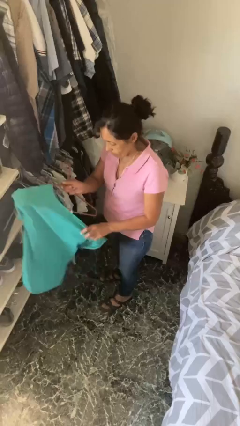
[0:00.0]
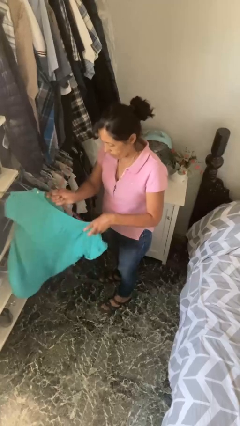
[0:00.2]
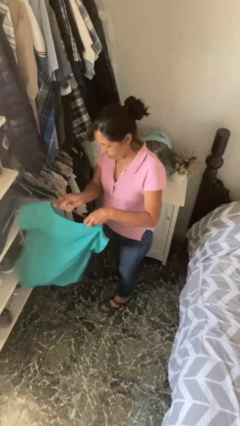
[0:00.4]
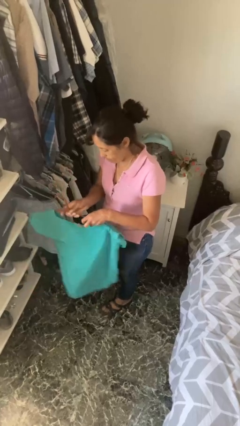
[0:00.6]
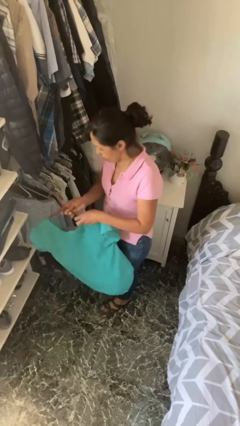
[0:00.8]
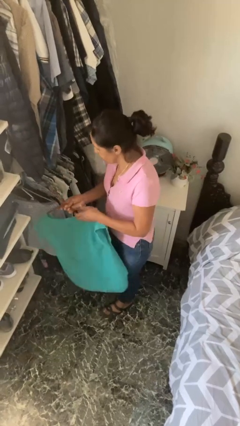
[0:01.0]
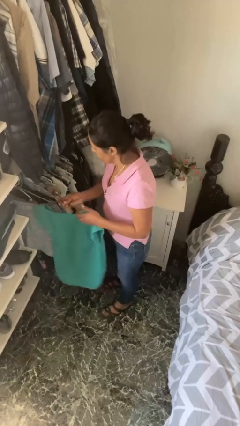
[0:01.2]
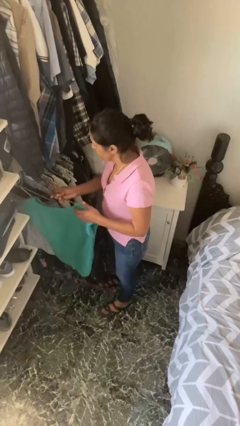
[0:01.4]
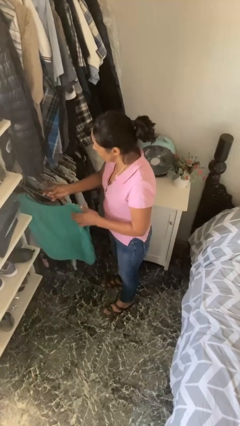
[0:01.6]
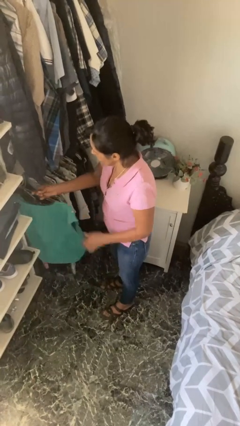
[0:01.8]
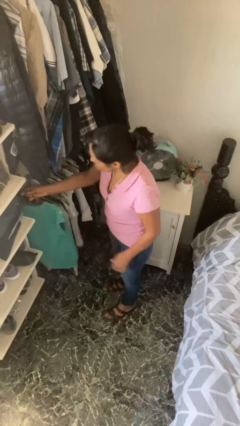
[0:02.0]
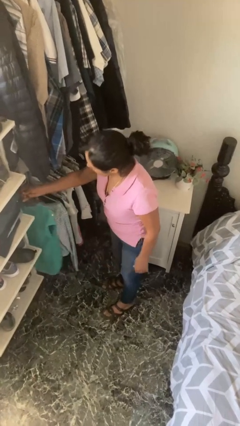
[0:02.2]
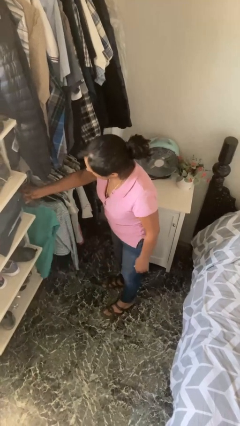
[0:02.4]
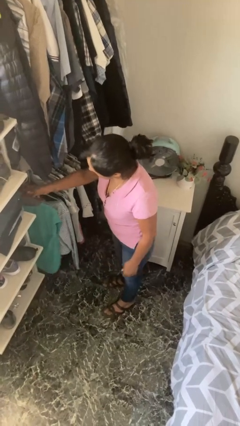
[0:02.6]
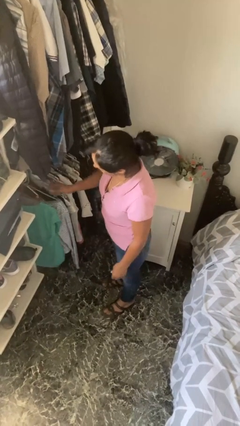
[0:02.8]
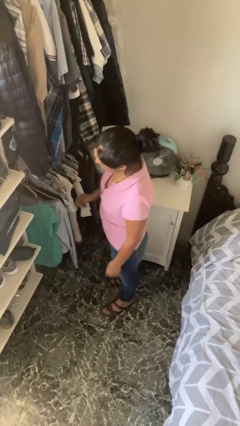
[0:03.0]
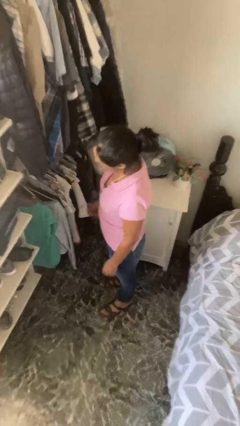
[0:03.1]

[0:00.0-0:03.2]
person puts clothes into closet

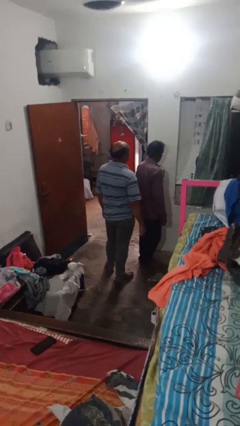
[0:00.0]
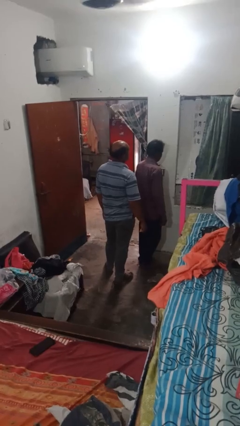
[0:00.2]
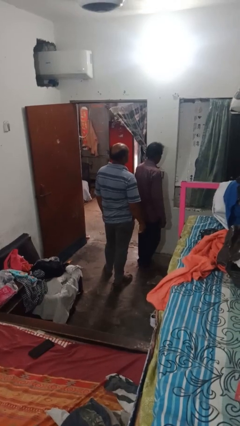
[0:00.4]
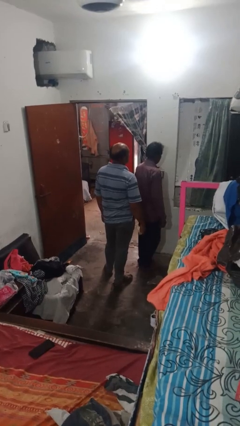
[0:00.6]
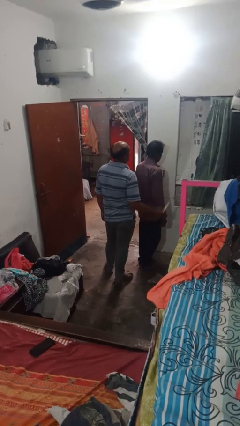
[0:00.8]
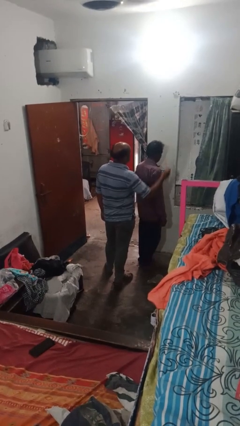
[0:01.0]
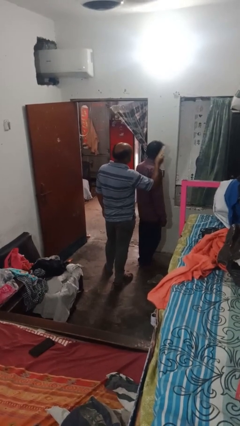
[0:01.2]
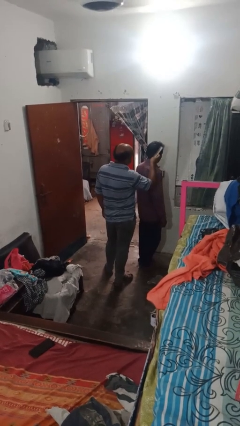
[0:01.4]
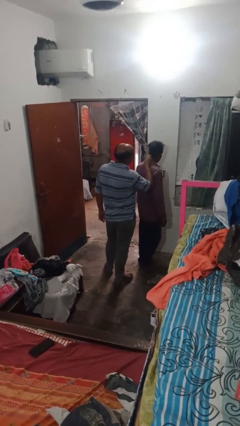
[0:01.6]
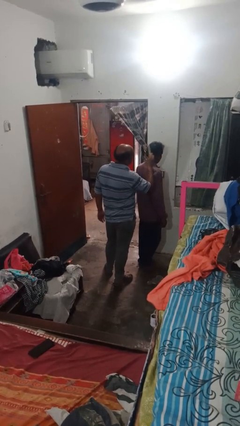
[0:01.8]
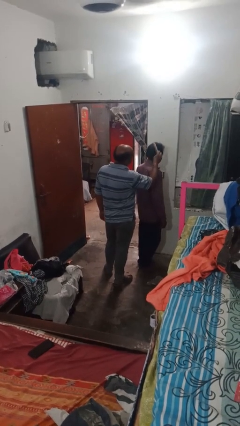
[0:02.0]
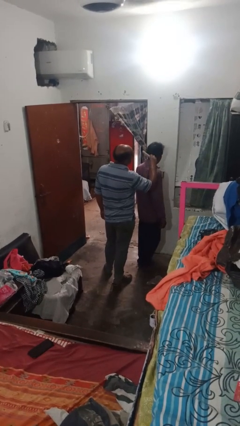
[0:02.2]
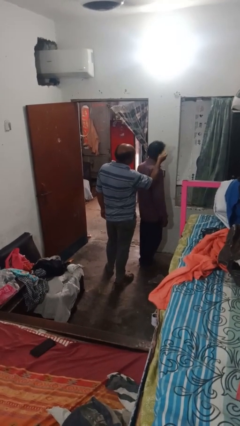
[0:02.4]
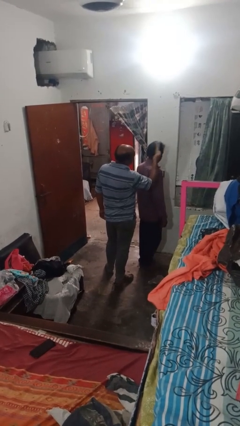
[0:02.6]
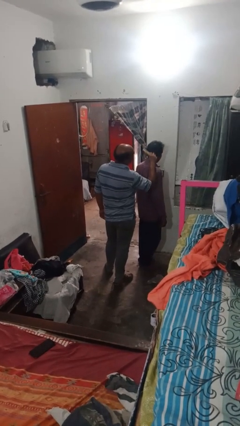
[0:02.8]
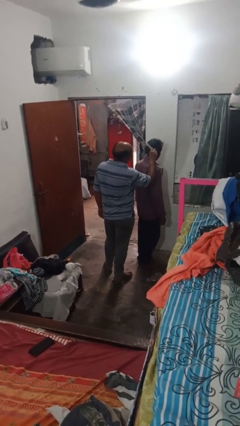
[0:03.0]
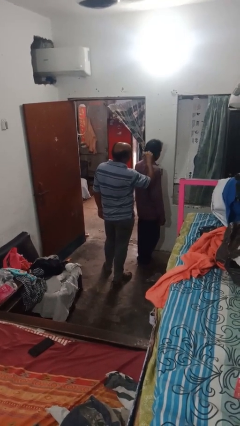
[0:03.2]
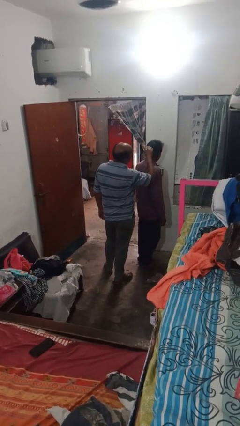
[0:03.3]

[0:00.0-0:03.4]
person brushes hair of person

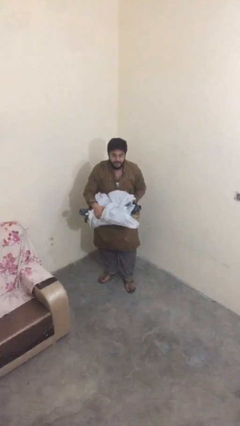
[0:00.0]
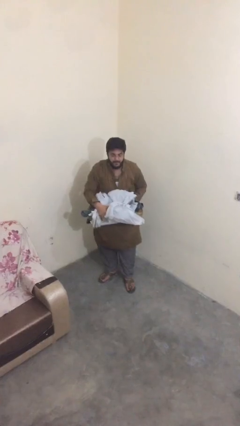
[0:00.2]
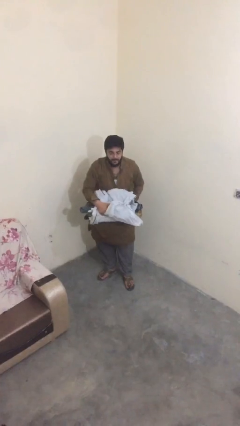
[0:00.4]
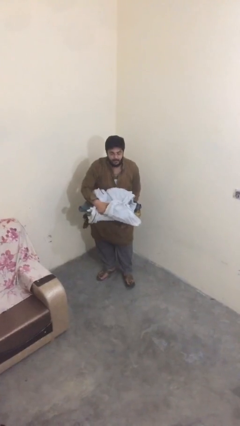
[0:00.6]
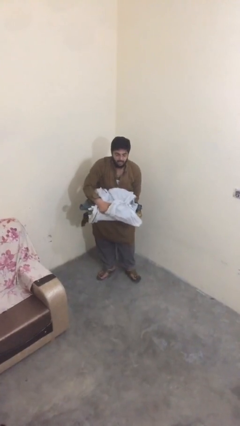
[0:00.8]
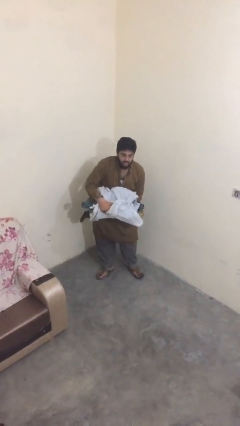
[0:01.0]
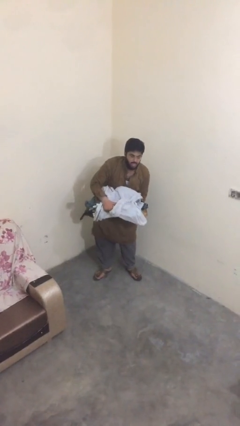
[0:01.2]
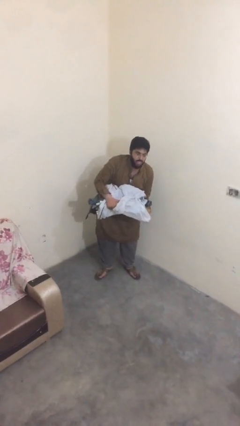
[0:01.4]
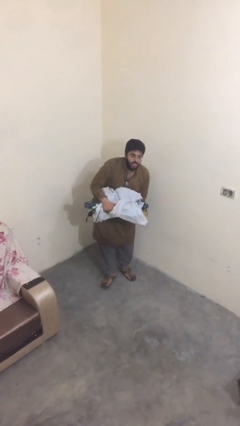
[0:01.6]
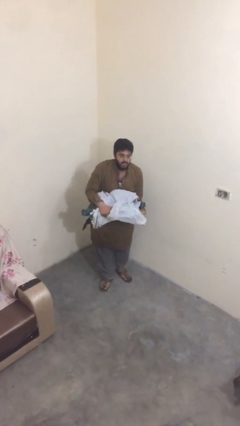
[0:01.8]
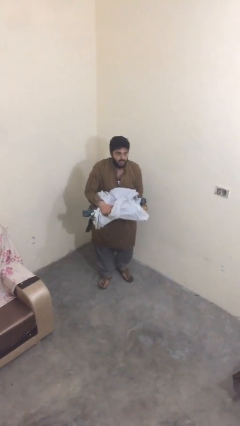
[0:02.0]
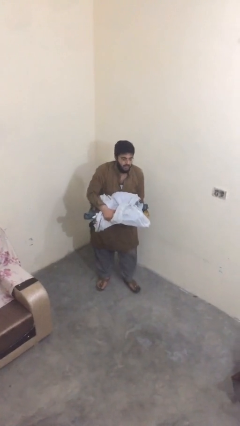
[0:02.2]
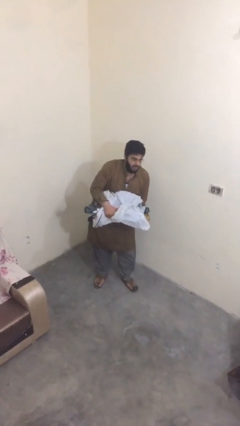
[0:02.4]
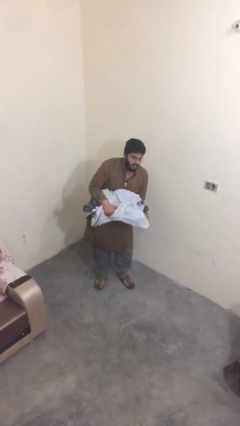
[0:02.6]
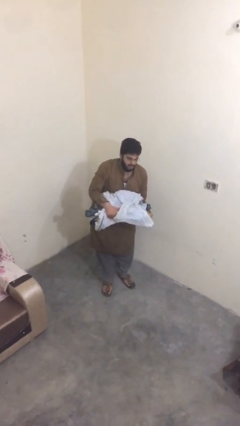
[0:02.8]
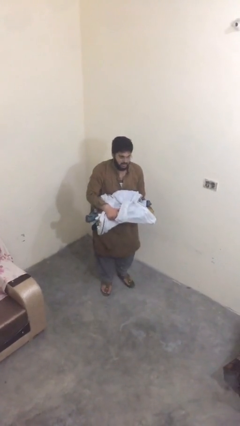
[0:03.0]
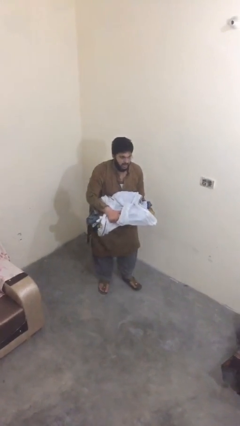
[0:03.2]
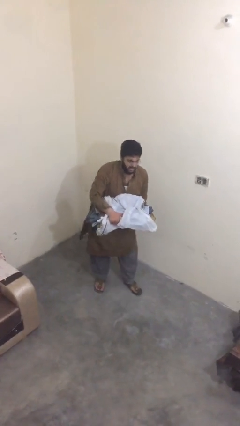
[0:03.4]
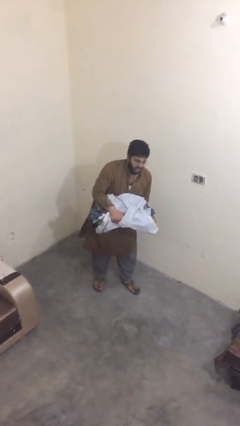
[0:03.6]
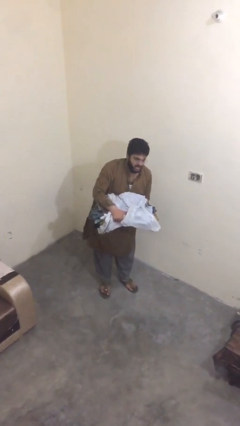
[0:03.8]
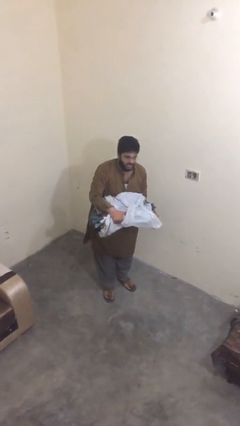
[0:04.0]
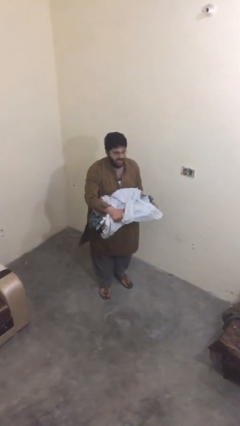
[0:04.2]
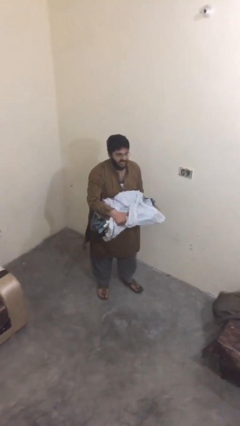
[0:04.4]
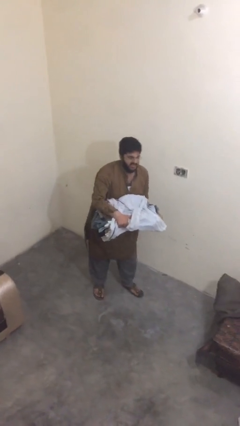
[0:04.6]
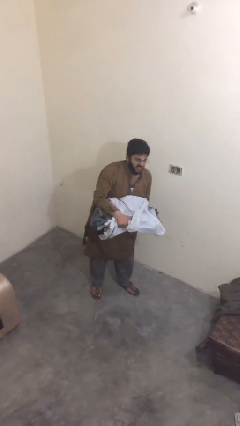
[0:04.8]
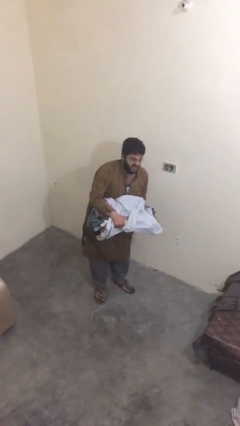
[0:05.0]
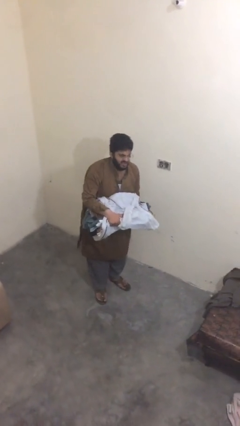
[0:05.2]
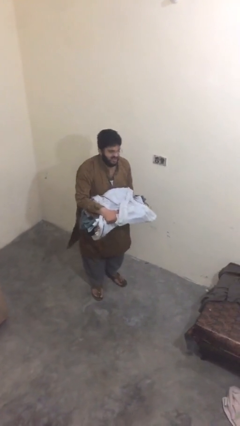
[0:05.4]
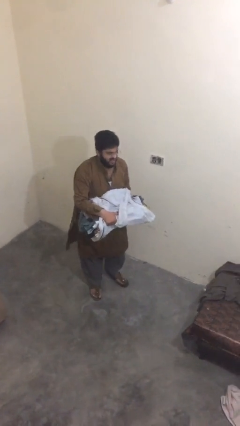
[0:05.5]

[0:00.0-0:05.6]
person carries heavy object

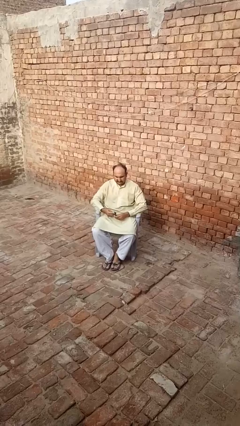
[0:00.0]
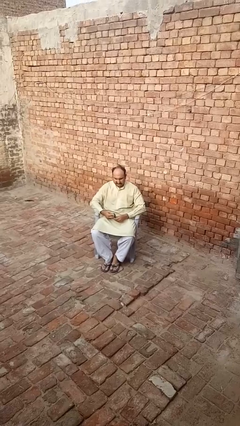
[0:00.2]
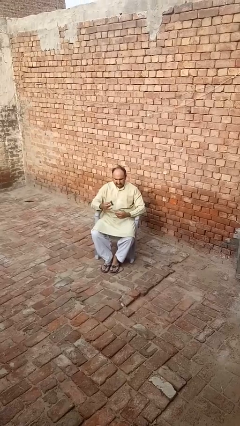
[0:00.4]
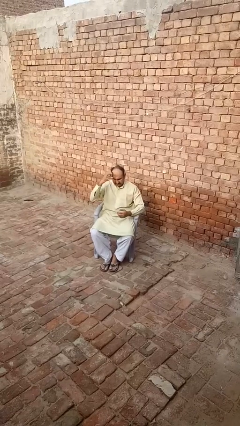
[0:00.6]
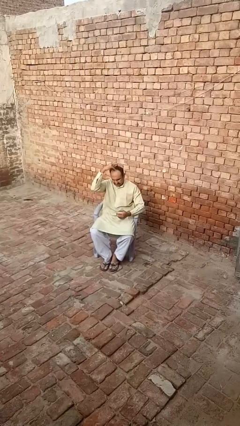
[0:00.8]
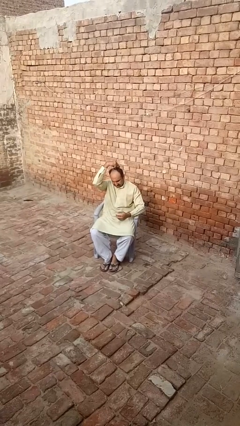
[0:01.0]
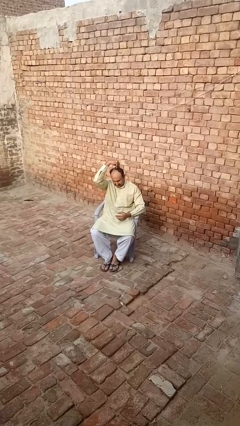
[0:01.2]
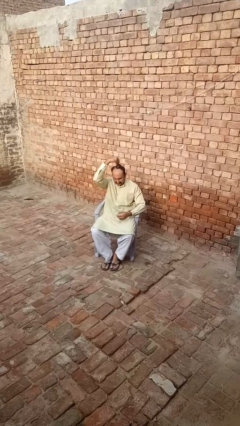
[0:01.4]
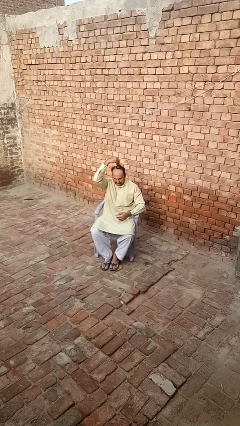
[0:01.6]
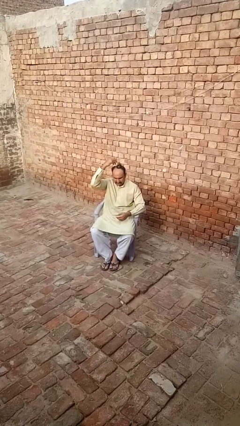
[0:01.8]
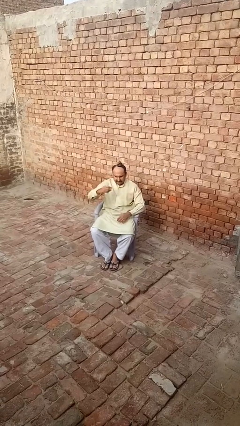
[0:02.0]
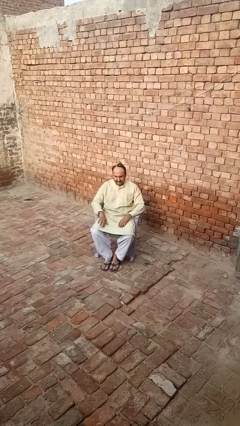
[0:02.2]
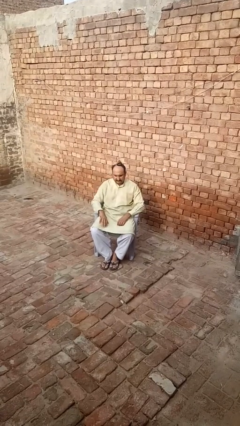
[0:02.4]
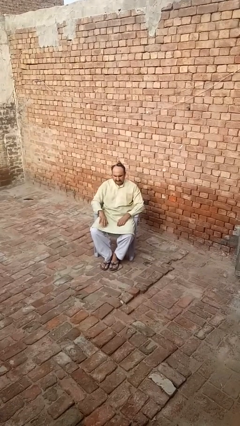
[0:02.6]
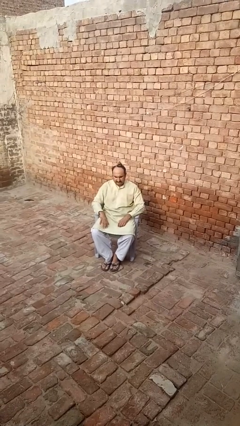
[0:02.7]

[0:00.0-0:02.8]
person puts hair in ponytail

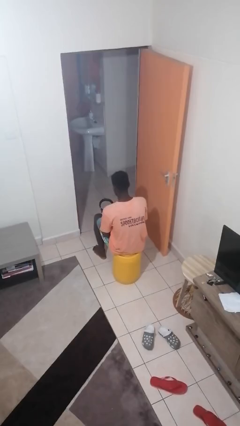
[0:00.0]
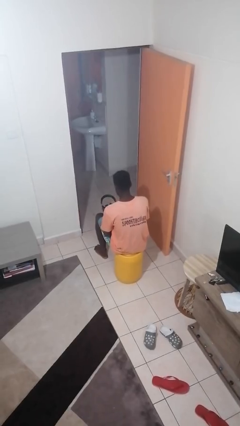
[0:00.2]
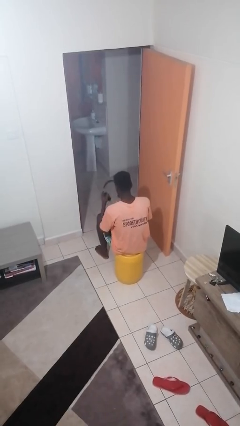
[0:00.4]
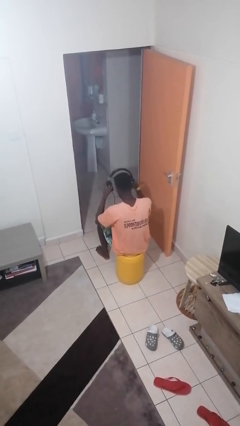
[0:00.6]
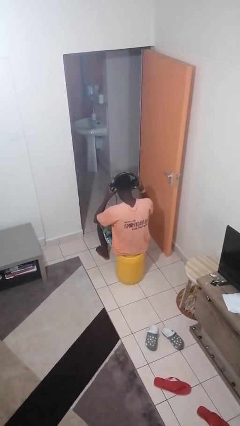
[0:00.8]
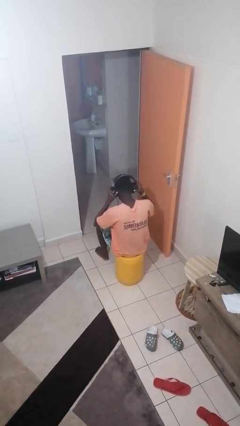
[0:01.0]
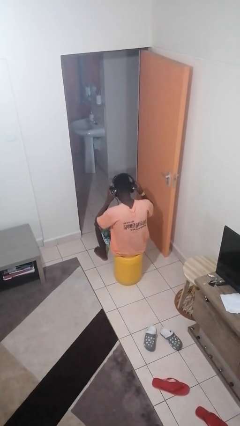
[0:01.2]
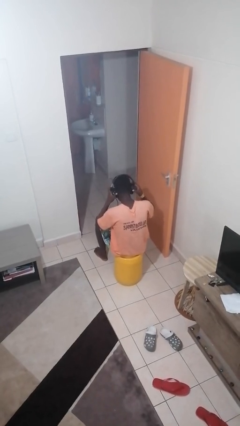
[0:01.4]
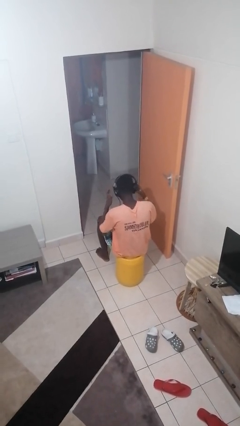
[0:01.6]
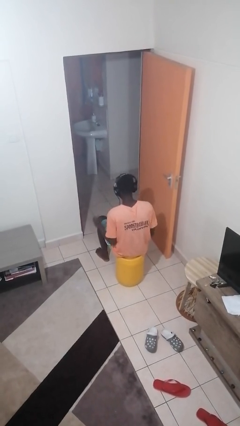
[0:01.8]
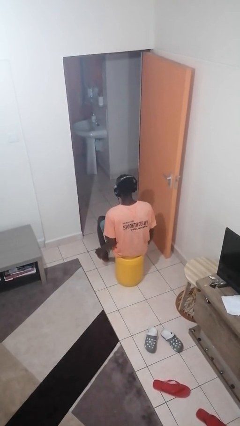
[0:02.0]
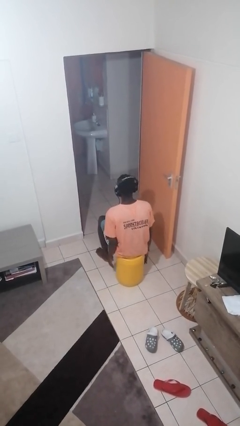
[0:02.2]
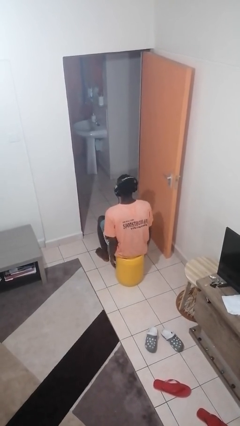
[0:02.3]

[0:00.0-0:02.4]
person puts on headphones

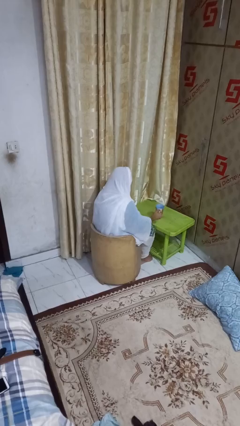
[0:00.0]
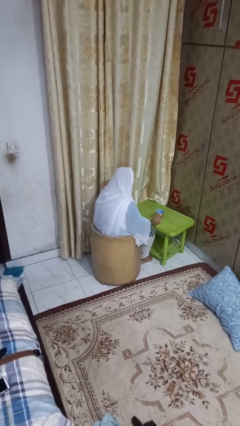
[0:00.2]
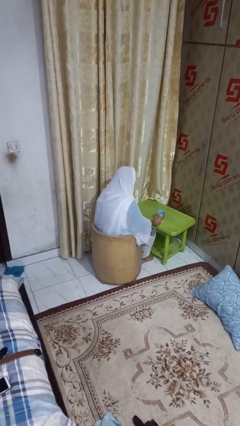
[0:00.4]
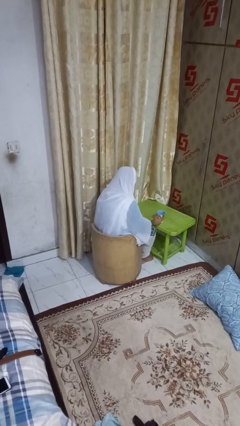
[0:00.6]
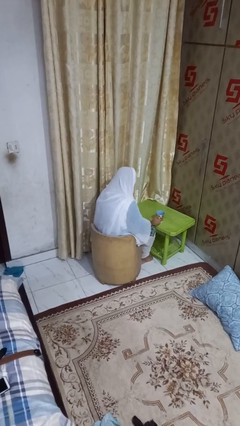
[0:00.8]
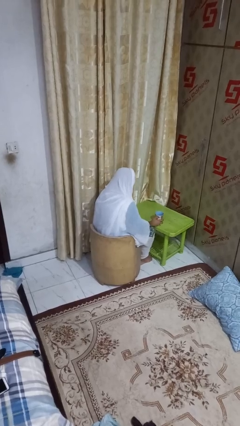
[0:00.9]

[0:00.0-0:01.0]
person puts down object on table
